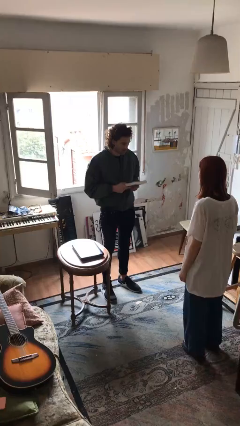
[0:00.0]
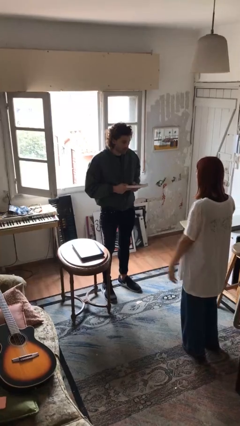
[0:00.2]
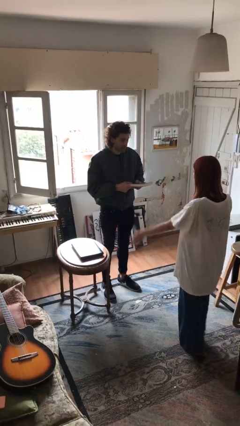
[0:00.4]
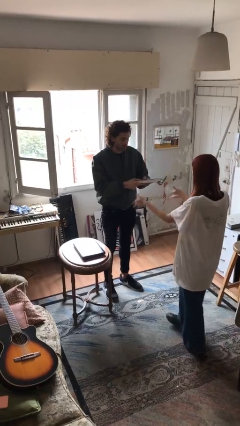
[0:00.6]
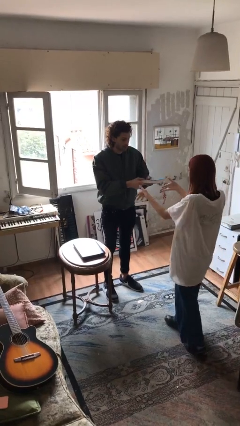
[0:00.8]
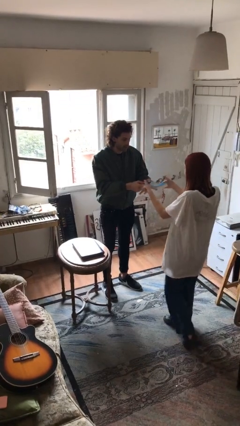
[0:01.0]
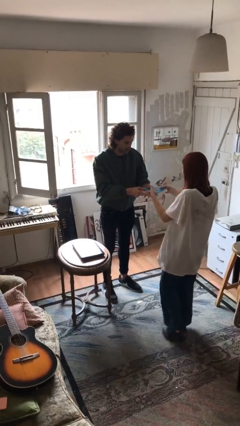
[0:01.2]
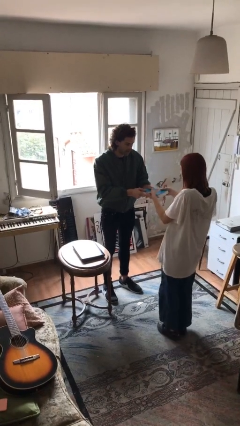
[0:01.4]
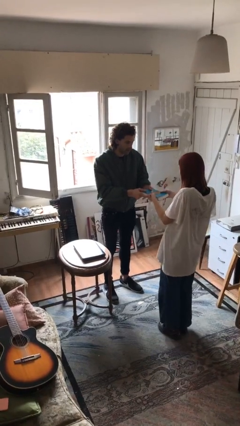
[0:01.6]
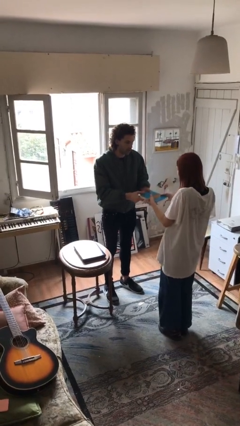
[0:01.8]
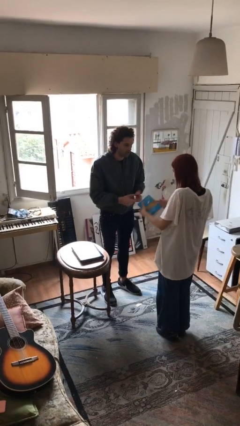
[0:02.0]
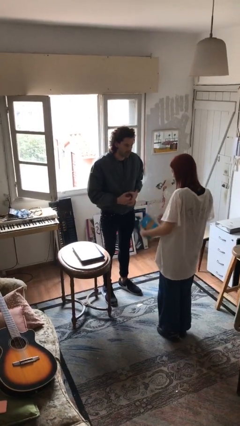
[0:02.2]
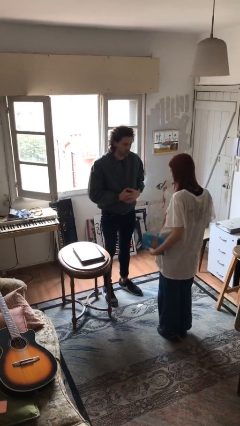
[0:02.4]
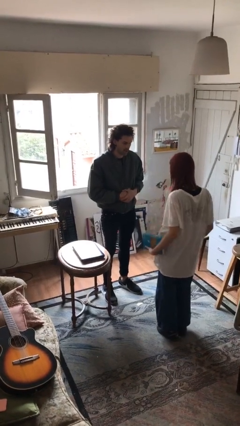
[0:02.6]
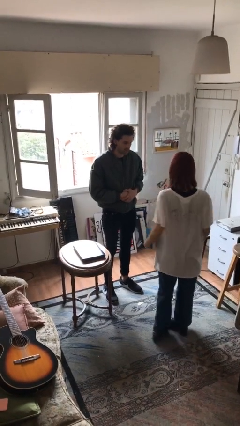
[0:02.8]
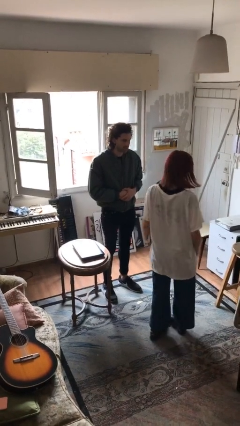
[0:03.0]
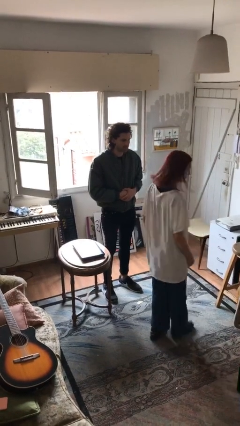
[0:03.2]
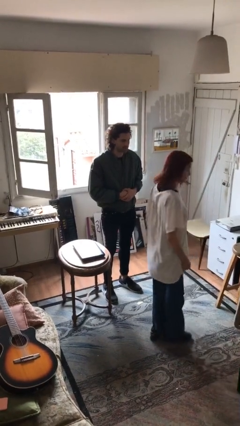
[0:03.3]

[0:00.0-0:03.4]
person transfers object to person

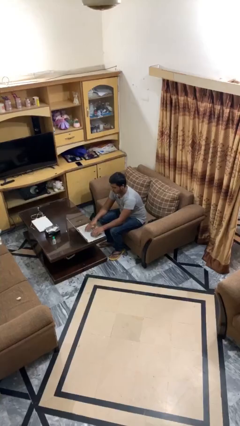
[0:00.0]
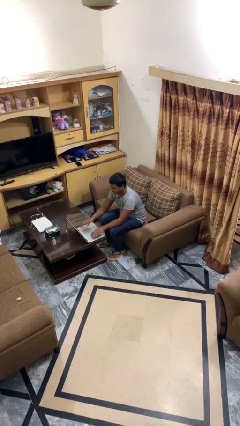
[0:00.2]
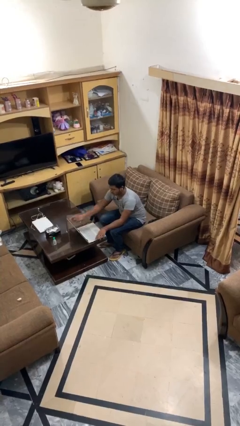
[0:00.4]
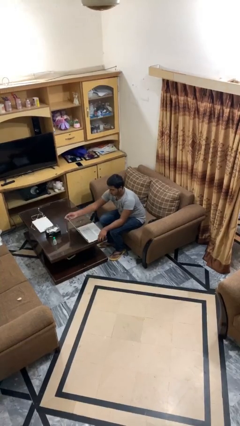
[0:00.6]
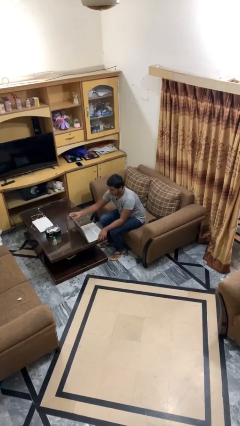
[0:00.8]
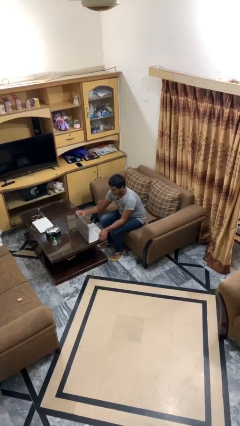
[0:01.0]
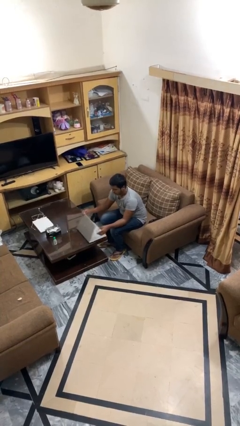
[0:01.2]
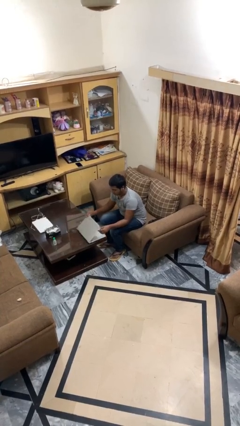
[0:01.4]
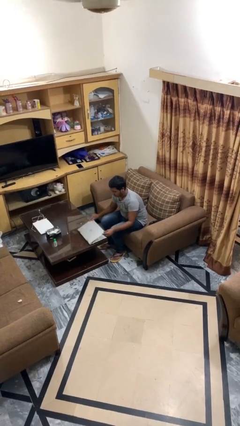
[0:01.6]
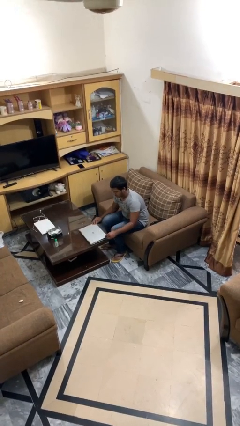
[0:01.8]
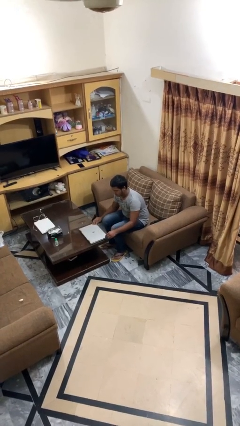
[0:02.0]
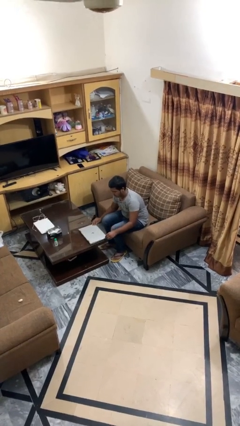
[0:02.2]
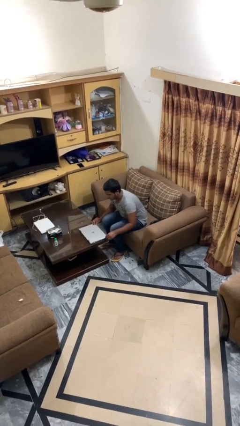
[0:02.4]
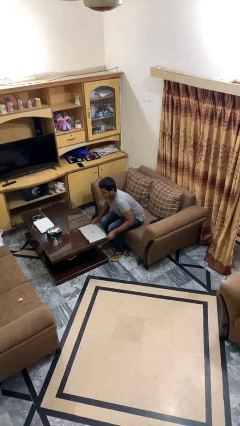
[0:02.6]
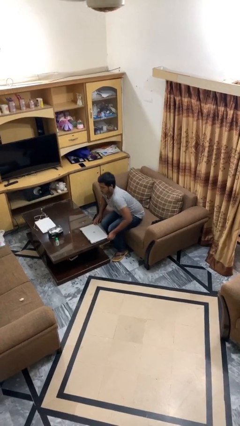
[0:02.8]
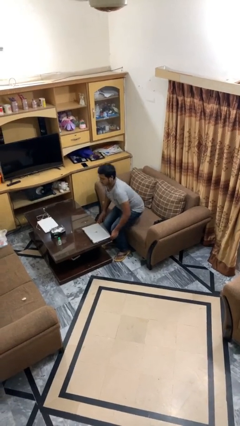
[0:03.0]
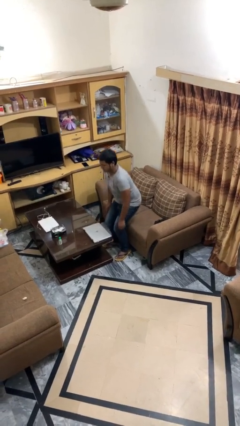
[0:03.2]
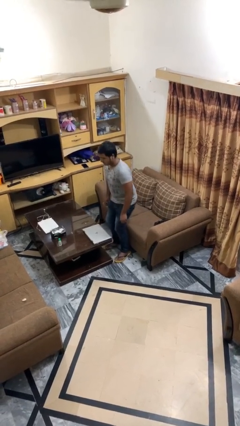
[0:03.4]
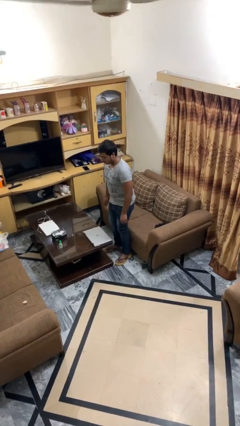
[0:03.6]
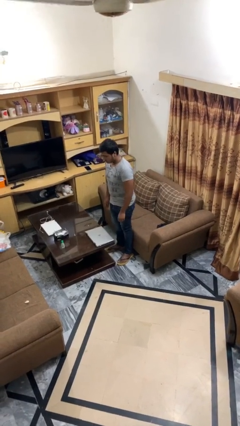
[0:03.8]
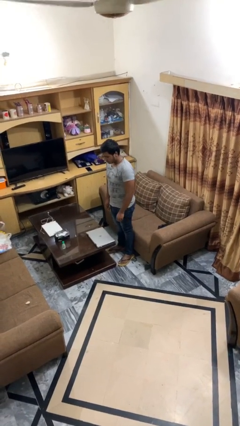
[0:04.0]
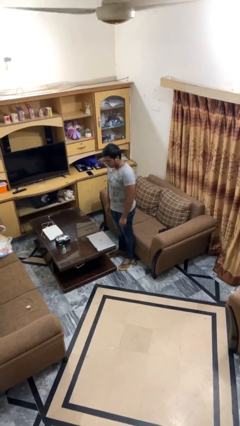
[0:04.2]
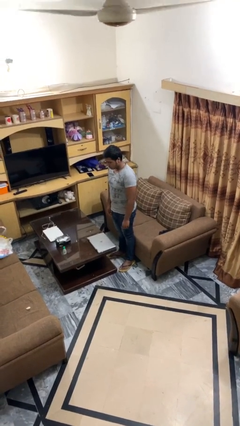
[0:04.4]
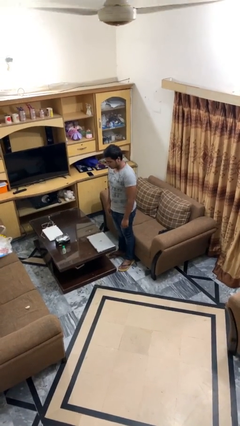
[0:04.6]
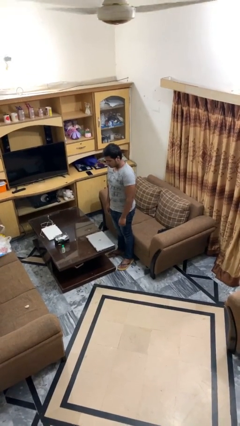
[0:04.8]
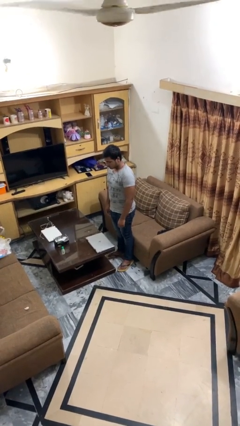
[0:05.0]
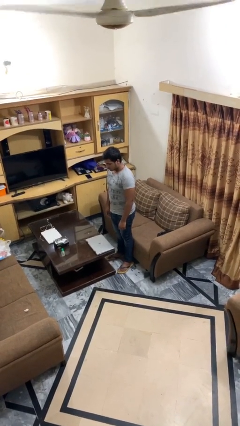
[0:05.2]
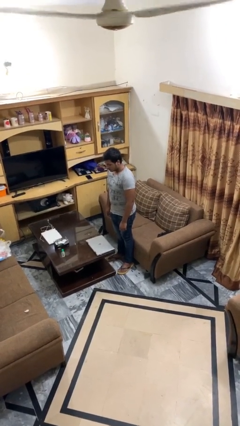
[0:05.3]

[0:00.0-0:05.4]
person stands up

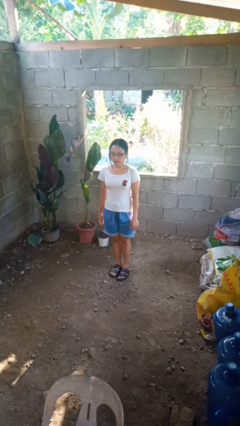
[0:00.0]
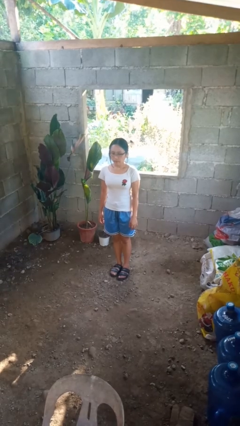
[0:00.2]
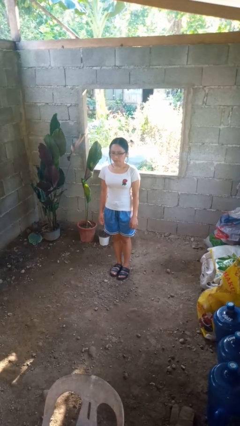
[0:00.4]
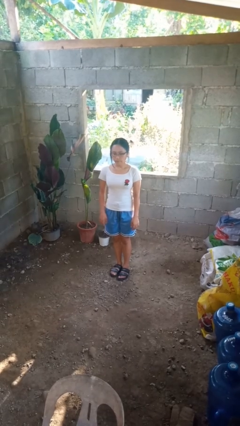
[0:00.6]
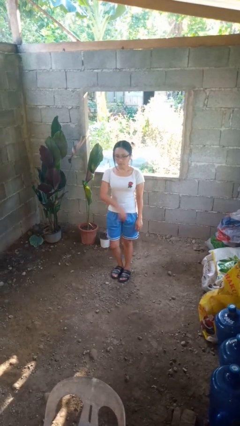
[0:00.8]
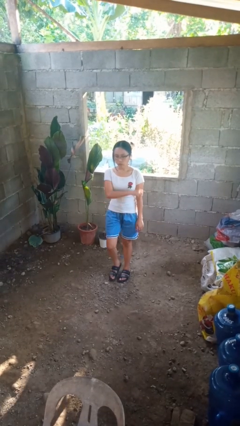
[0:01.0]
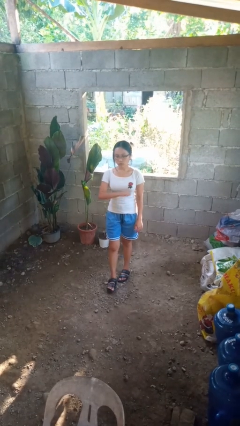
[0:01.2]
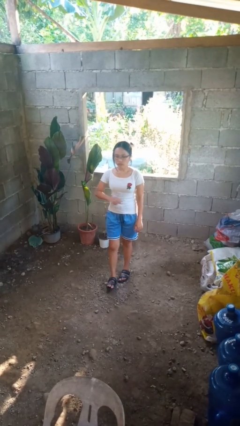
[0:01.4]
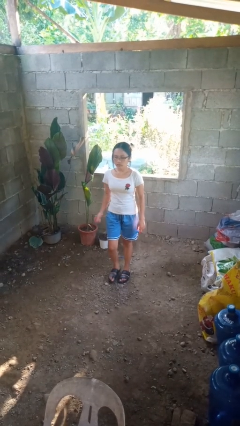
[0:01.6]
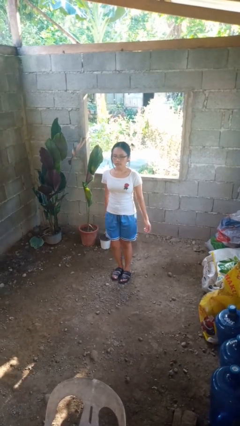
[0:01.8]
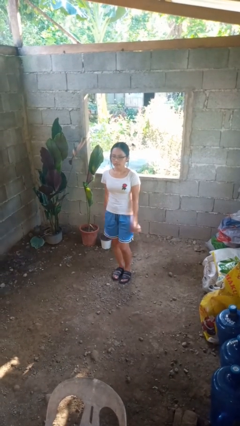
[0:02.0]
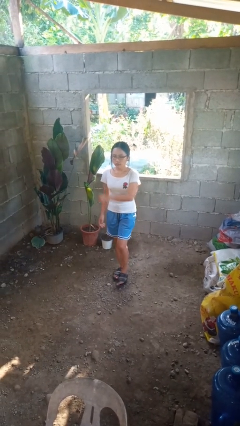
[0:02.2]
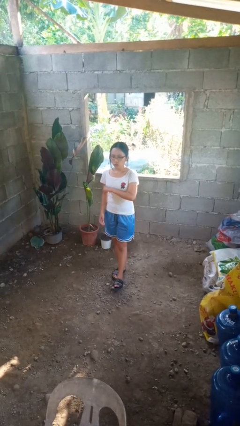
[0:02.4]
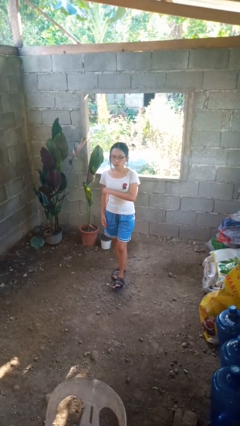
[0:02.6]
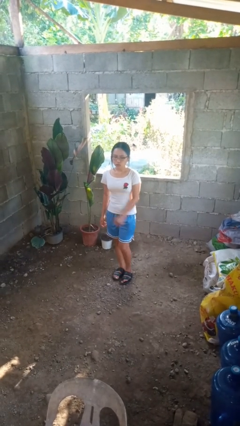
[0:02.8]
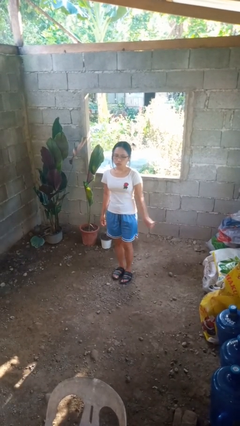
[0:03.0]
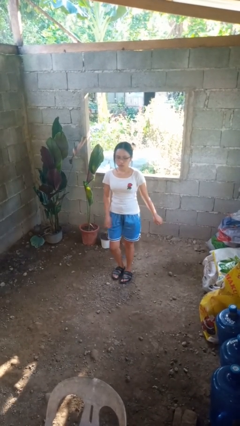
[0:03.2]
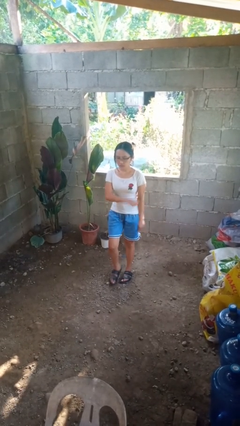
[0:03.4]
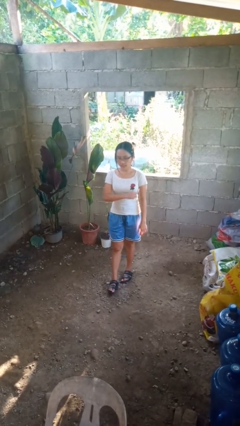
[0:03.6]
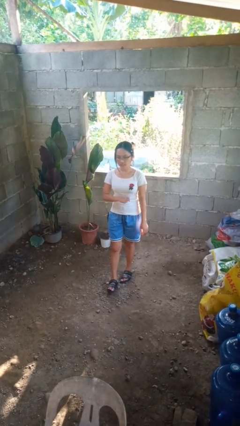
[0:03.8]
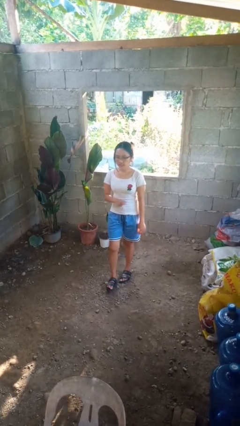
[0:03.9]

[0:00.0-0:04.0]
person dances in place

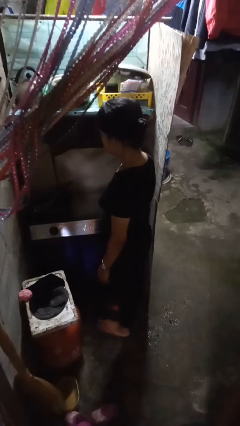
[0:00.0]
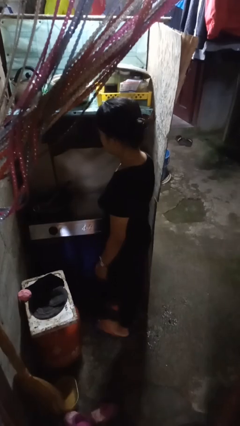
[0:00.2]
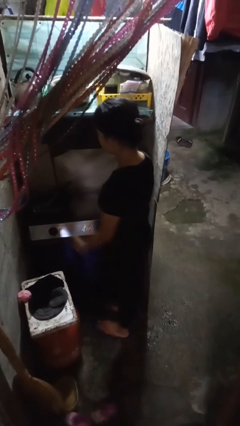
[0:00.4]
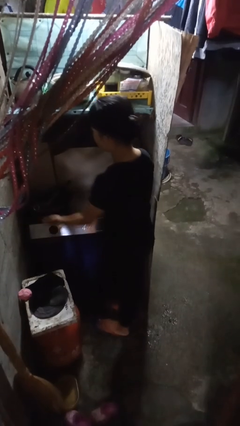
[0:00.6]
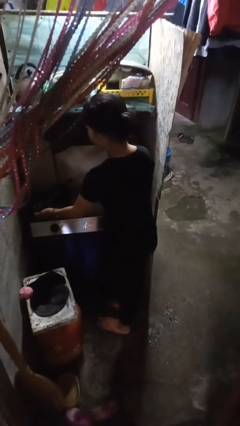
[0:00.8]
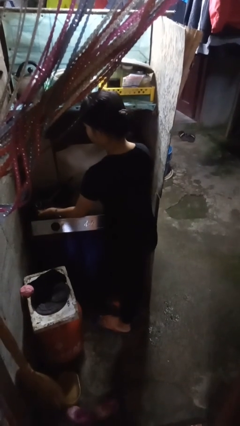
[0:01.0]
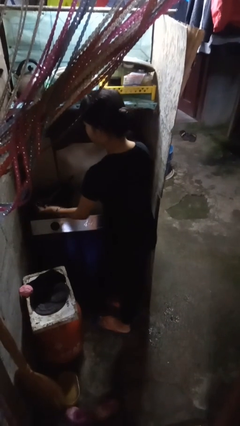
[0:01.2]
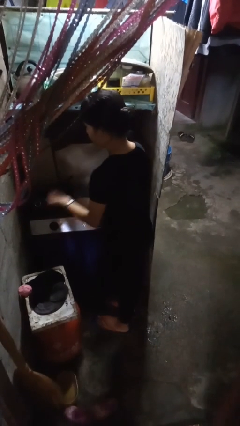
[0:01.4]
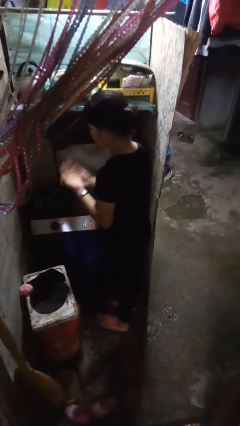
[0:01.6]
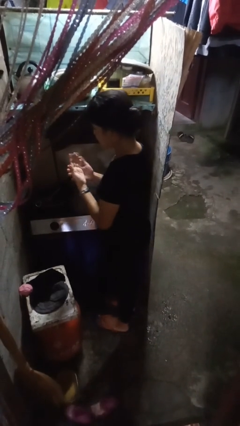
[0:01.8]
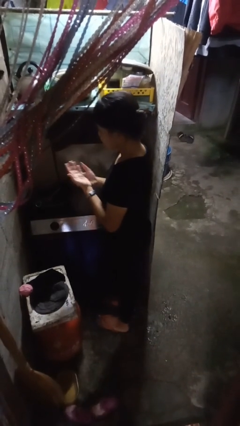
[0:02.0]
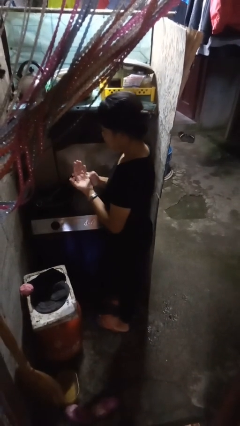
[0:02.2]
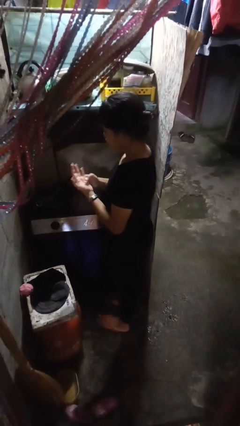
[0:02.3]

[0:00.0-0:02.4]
person burns hand

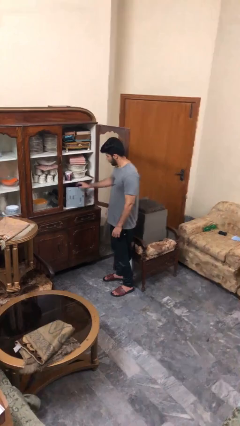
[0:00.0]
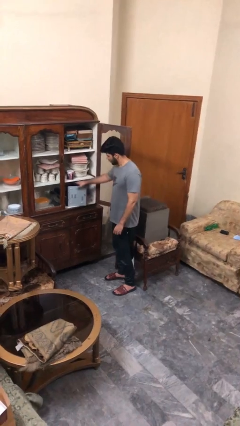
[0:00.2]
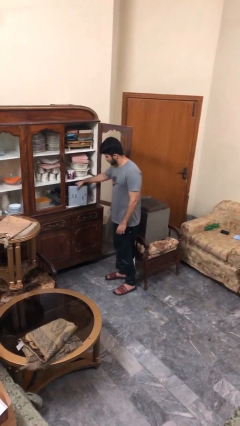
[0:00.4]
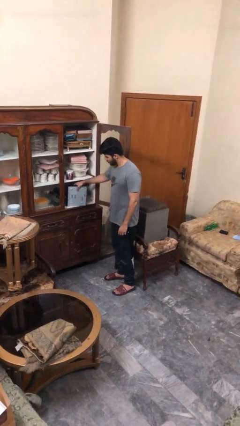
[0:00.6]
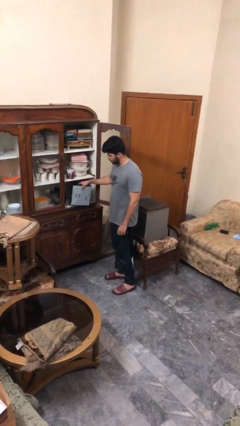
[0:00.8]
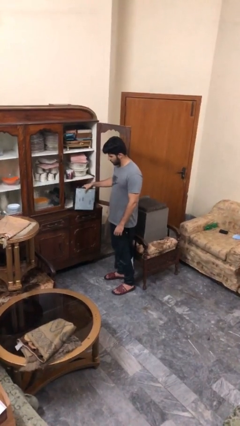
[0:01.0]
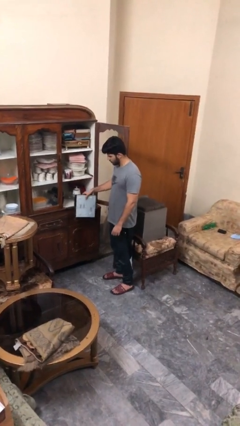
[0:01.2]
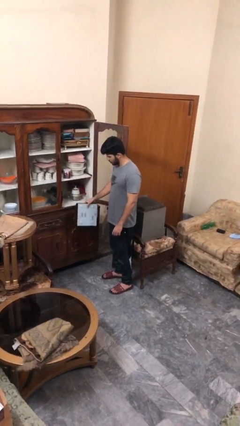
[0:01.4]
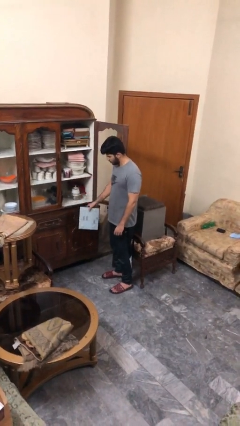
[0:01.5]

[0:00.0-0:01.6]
person picks up object from countertop

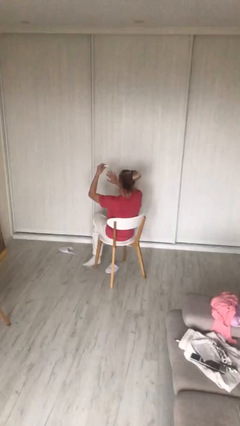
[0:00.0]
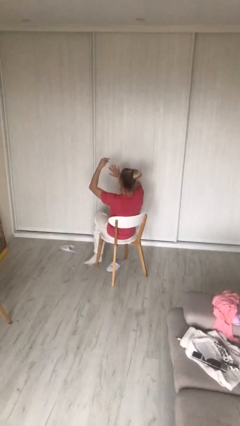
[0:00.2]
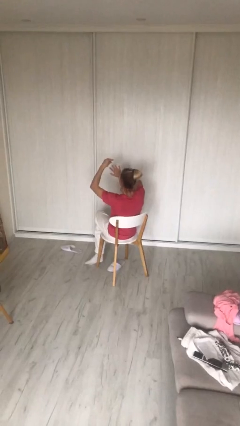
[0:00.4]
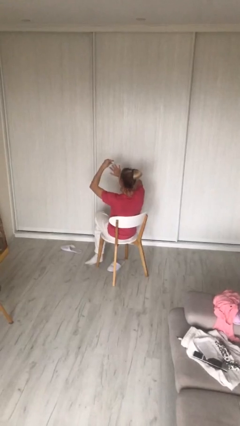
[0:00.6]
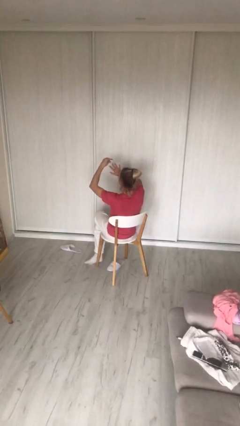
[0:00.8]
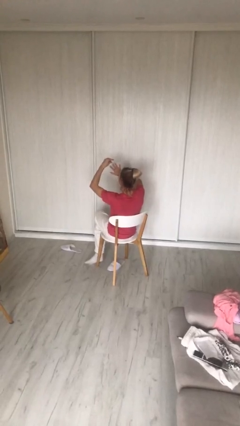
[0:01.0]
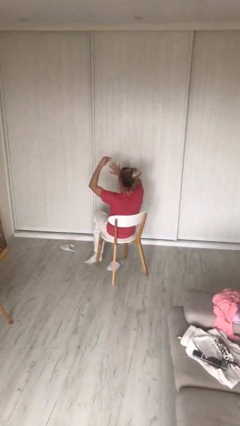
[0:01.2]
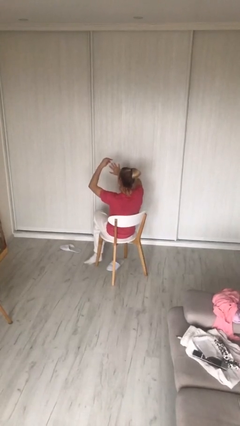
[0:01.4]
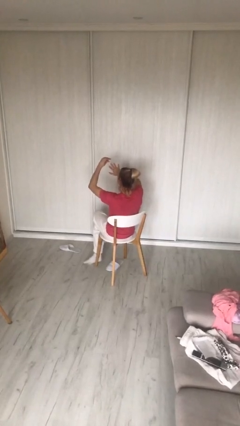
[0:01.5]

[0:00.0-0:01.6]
person paints fingernails
